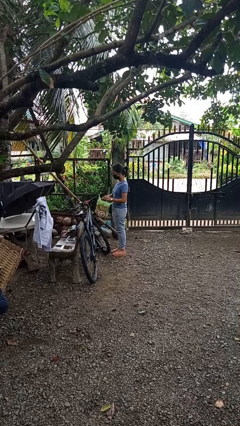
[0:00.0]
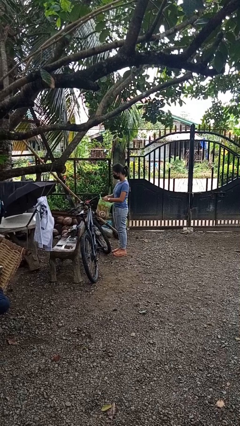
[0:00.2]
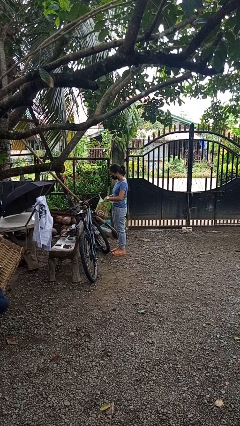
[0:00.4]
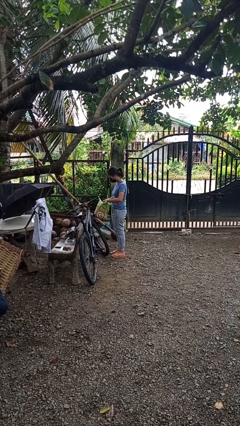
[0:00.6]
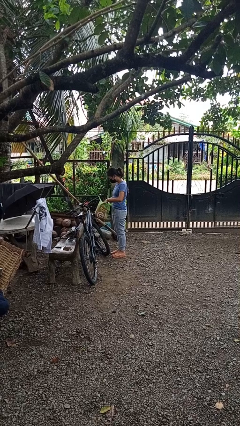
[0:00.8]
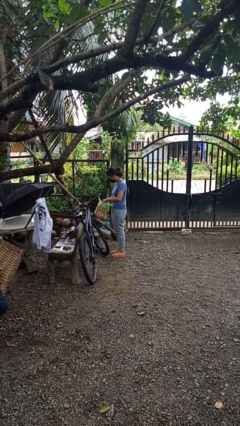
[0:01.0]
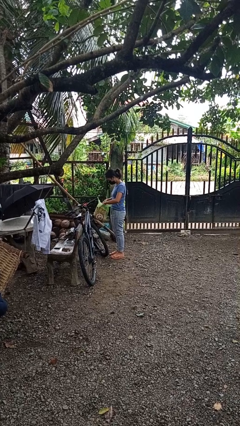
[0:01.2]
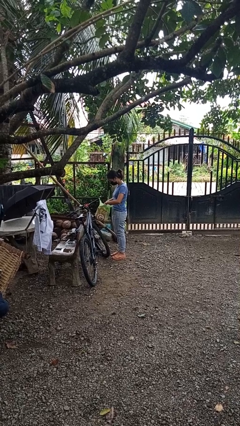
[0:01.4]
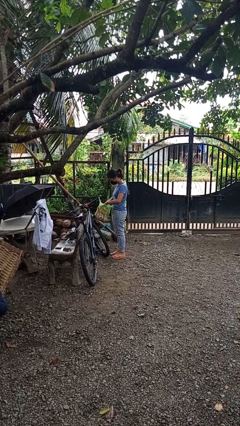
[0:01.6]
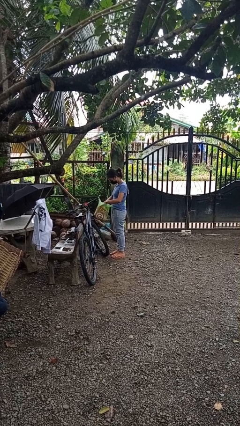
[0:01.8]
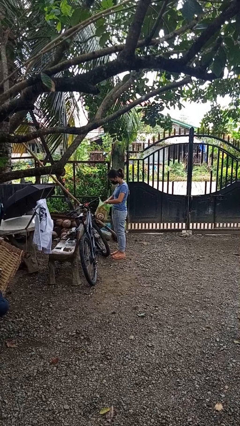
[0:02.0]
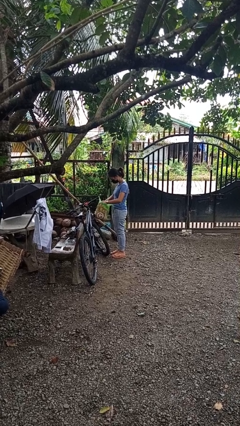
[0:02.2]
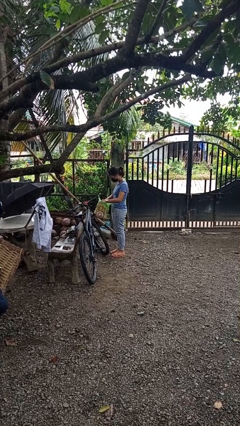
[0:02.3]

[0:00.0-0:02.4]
person searches in bag

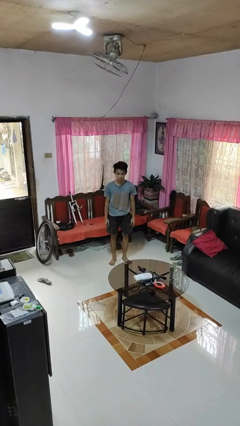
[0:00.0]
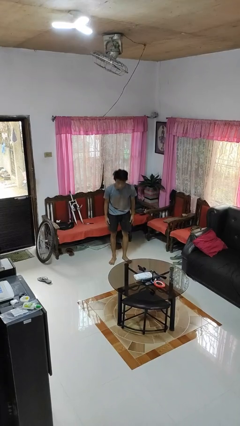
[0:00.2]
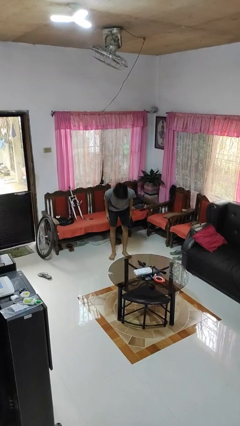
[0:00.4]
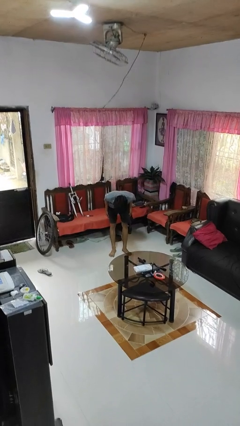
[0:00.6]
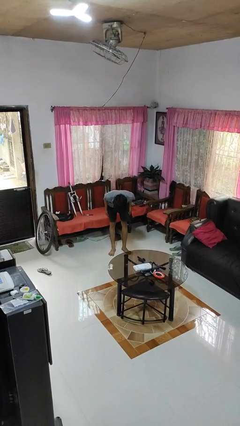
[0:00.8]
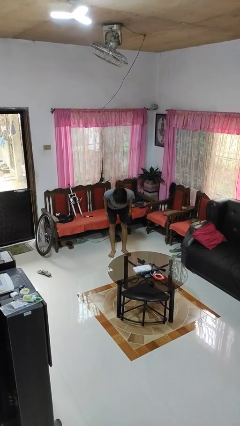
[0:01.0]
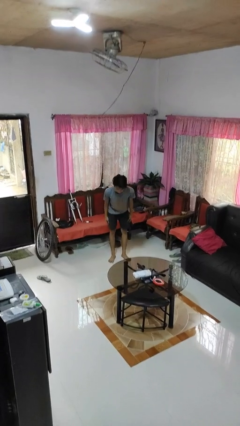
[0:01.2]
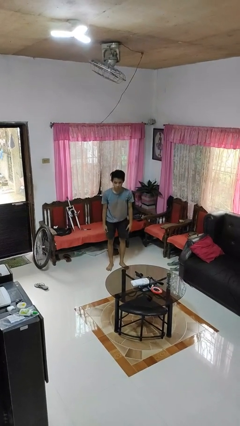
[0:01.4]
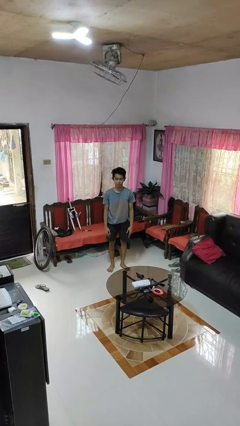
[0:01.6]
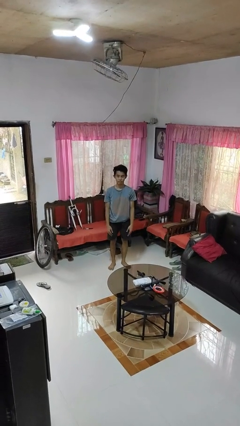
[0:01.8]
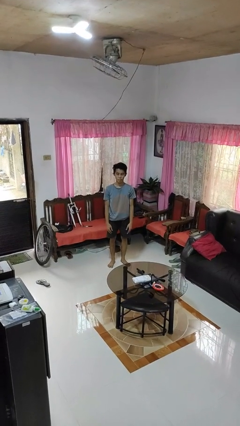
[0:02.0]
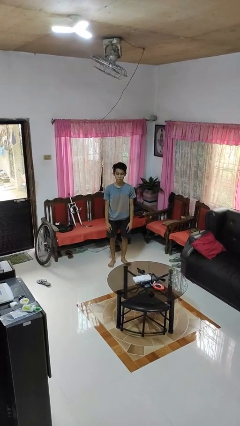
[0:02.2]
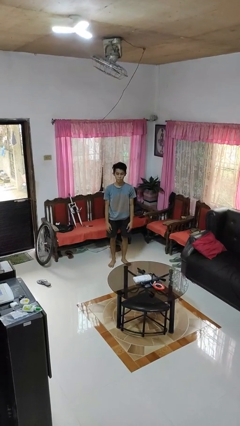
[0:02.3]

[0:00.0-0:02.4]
person bows

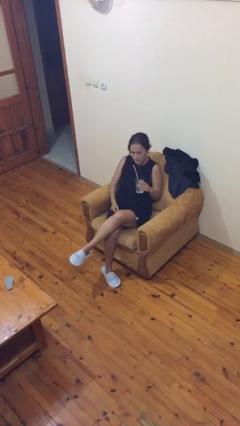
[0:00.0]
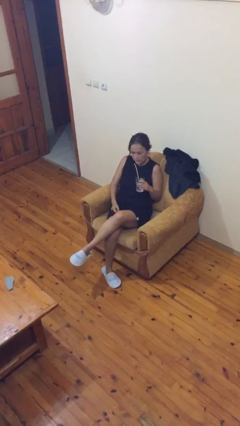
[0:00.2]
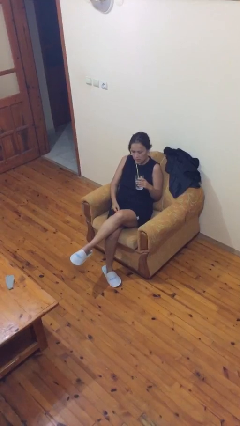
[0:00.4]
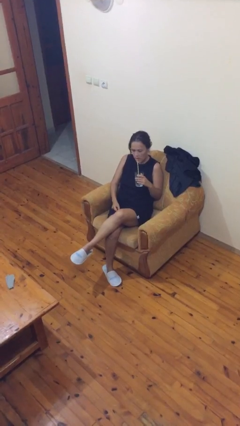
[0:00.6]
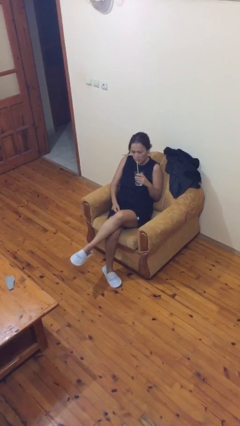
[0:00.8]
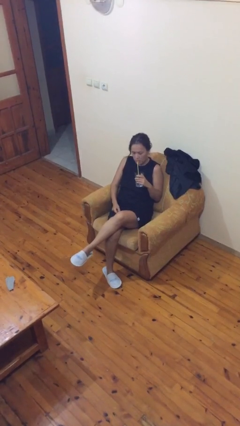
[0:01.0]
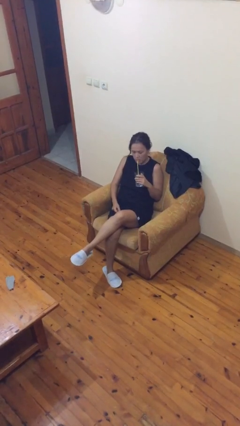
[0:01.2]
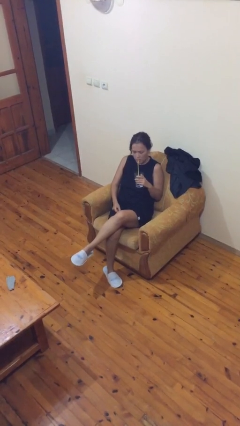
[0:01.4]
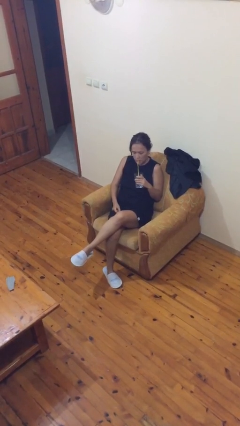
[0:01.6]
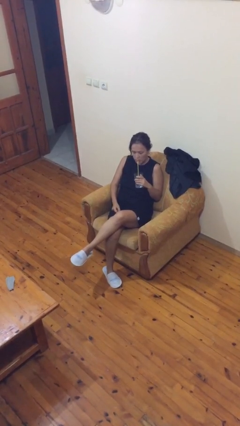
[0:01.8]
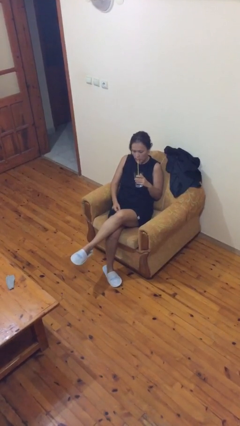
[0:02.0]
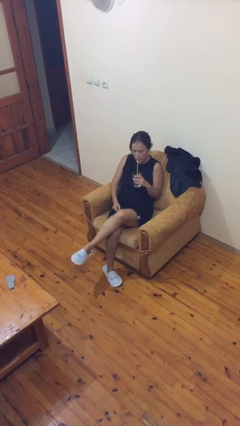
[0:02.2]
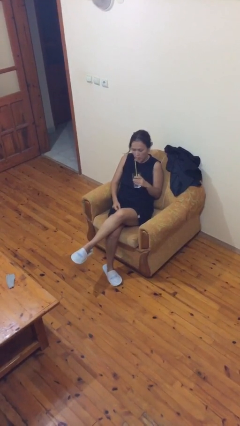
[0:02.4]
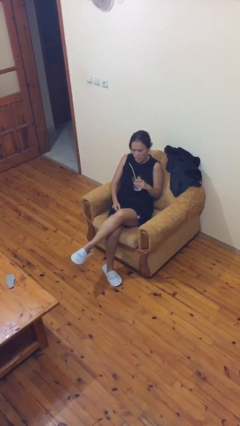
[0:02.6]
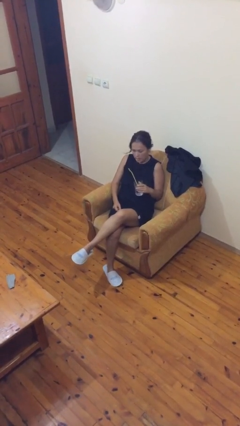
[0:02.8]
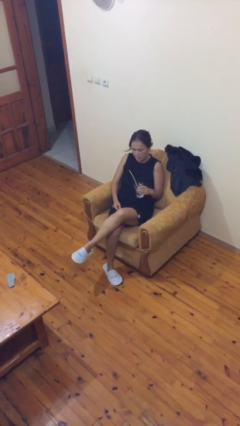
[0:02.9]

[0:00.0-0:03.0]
person drinks from straw

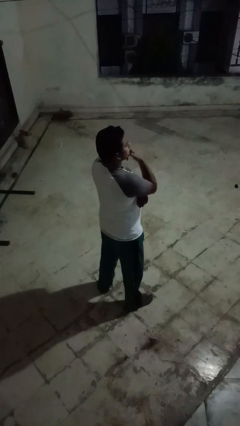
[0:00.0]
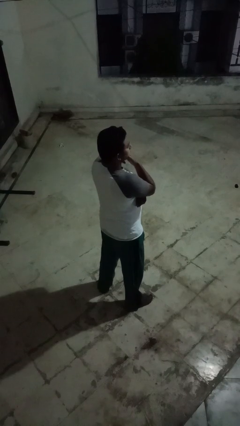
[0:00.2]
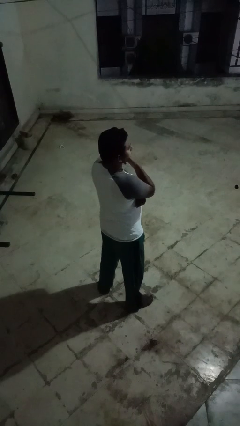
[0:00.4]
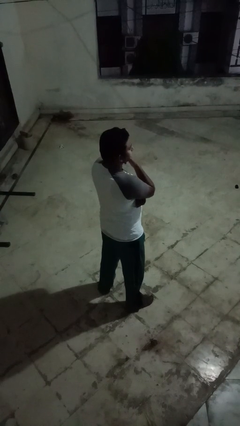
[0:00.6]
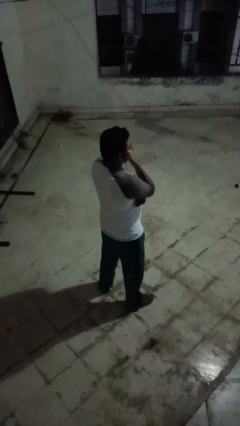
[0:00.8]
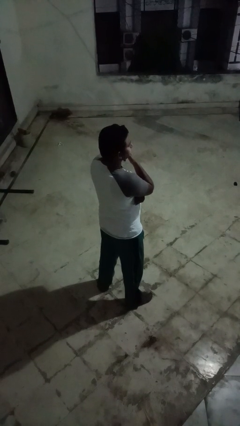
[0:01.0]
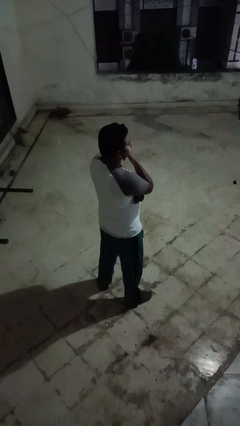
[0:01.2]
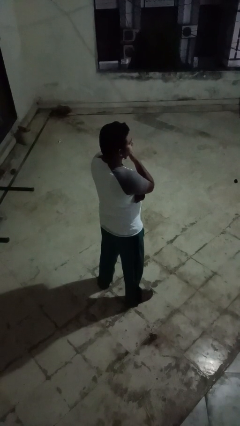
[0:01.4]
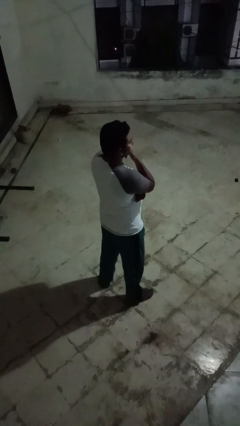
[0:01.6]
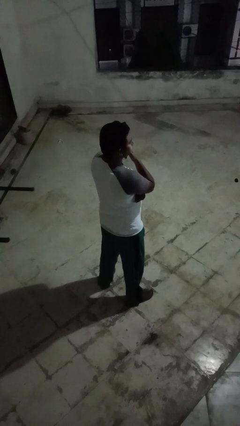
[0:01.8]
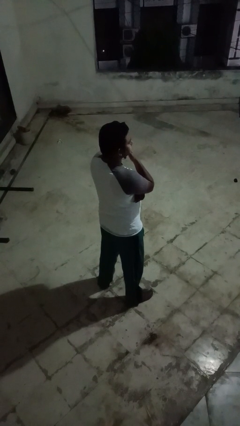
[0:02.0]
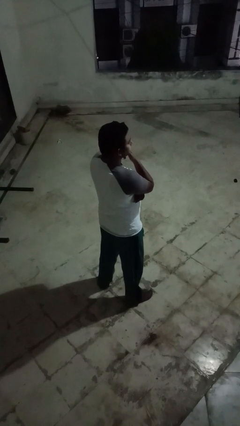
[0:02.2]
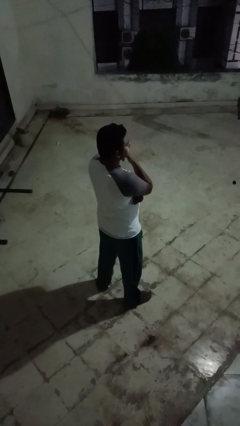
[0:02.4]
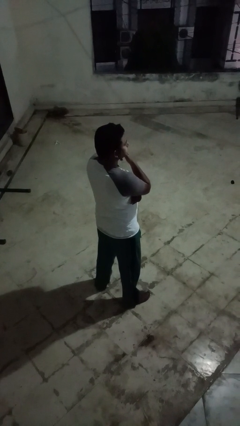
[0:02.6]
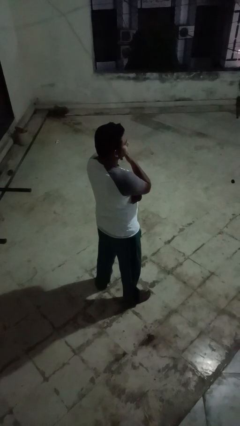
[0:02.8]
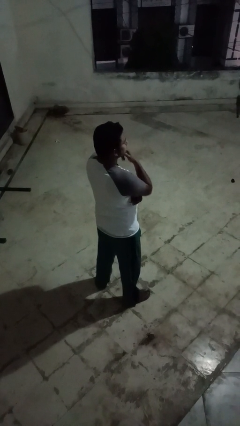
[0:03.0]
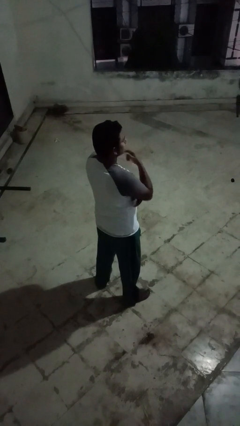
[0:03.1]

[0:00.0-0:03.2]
person strokes chin

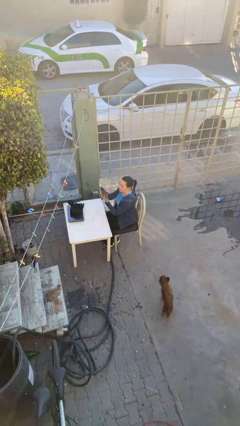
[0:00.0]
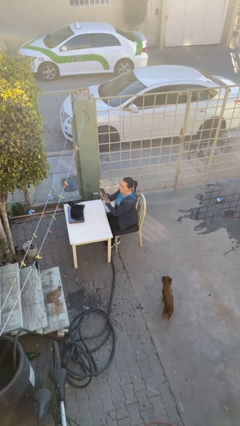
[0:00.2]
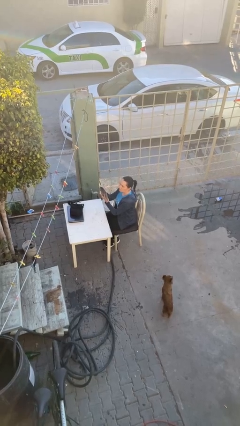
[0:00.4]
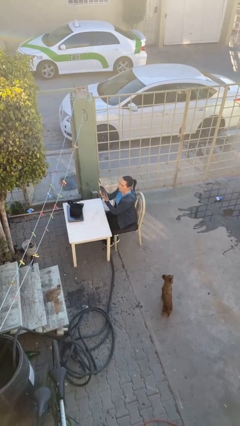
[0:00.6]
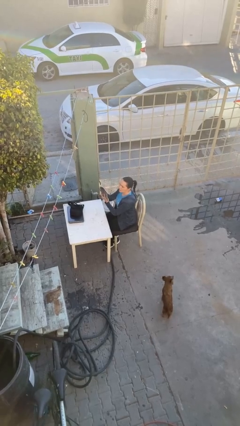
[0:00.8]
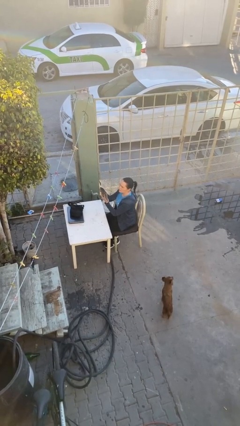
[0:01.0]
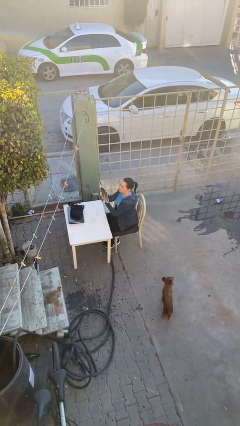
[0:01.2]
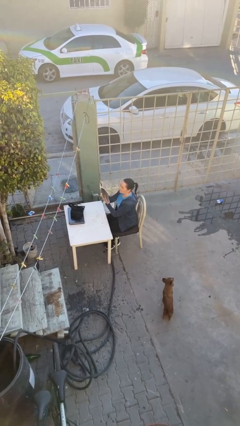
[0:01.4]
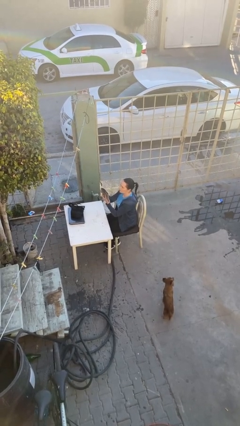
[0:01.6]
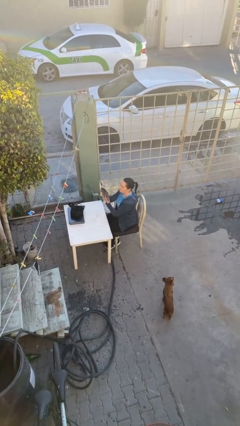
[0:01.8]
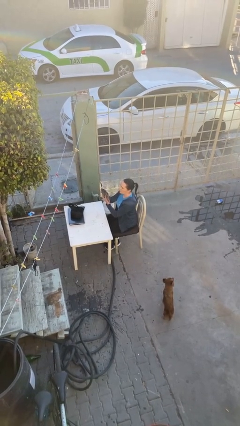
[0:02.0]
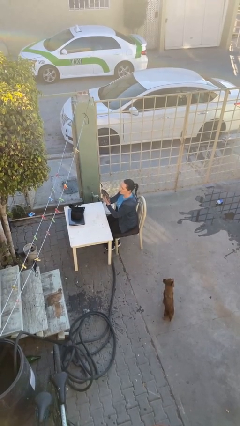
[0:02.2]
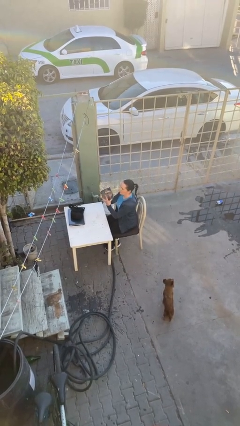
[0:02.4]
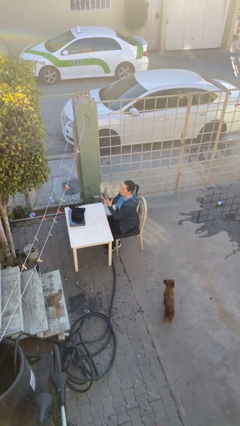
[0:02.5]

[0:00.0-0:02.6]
person reads document

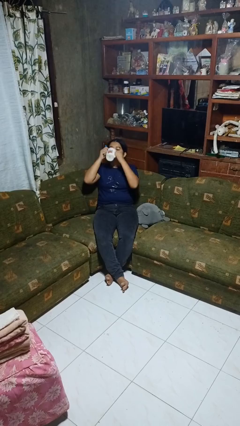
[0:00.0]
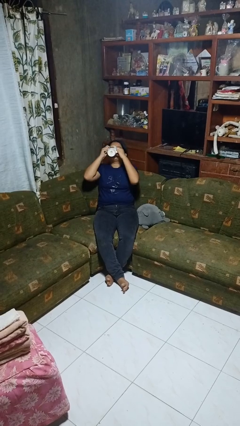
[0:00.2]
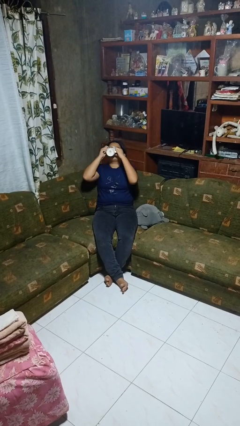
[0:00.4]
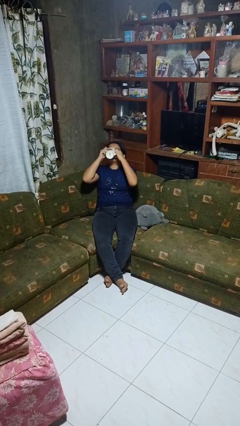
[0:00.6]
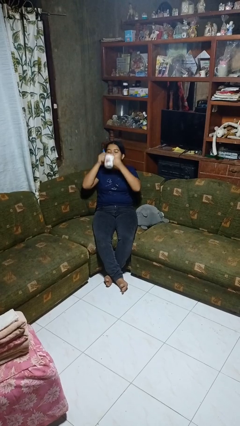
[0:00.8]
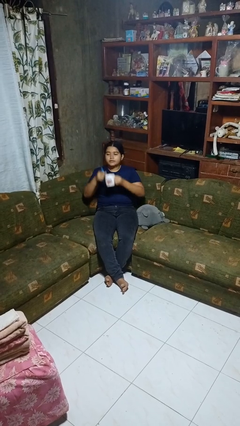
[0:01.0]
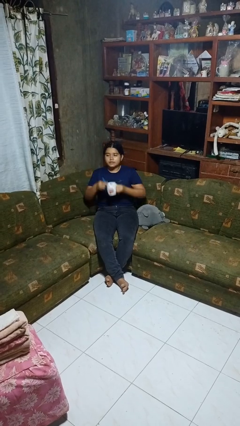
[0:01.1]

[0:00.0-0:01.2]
person drinks from mug

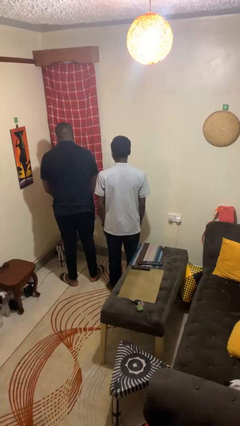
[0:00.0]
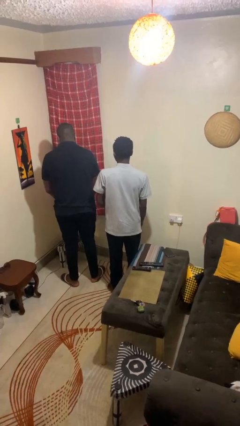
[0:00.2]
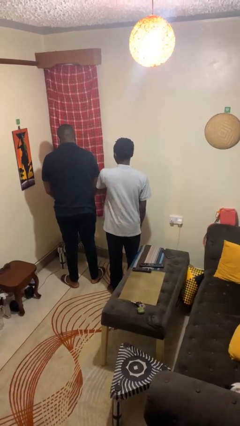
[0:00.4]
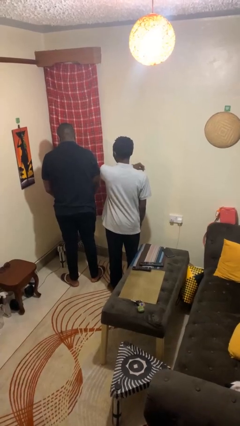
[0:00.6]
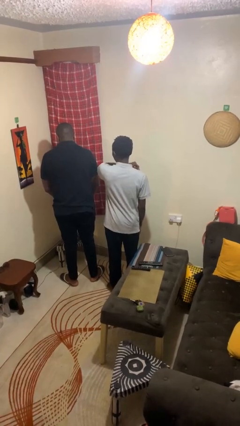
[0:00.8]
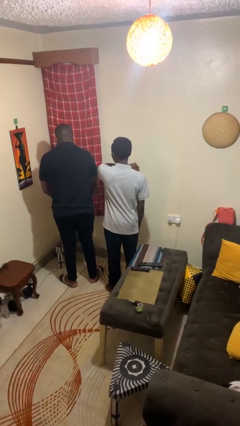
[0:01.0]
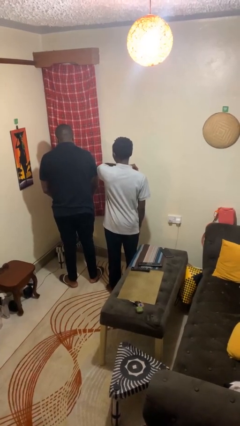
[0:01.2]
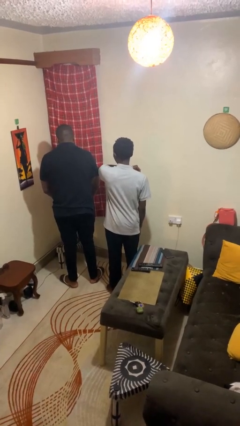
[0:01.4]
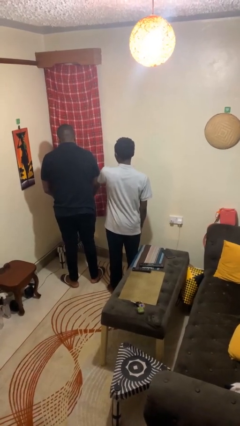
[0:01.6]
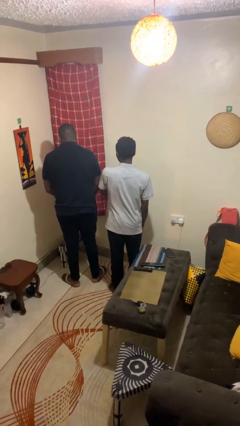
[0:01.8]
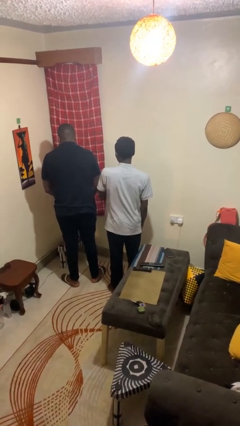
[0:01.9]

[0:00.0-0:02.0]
person nudges person with elbow

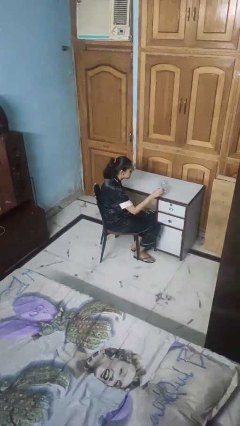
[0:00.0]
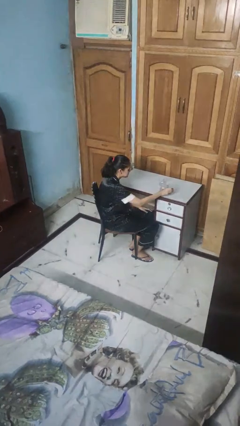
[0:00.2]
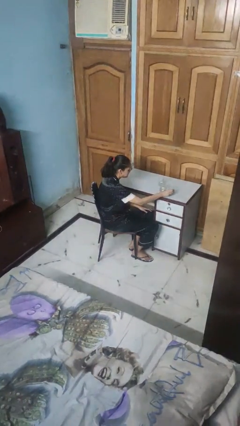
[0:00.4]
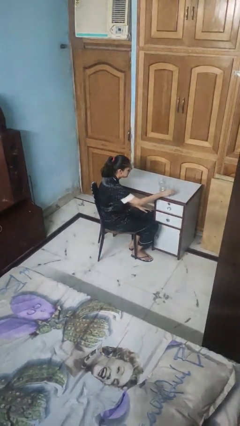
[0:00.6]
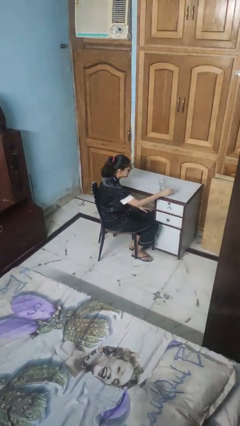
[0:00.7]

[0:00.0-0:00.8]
person puts down object on table
